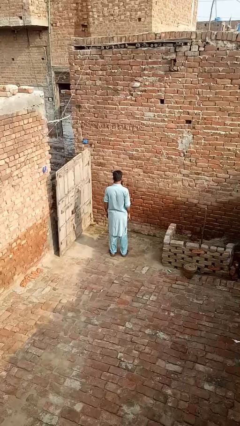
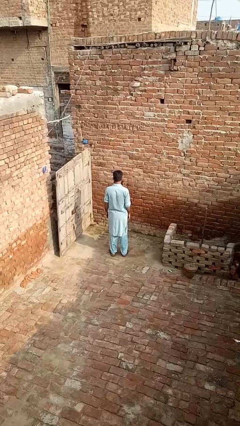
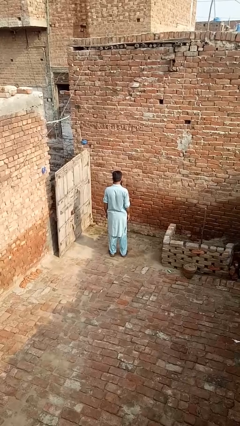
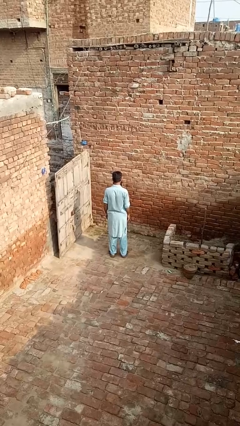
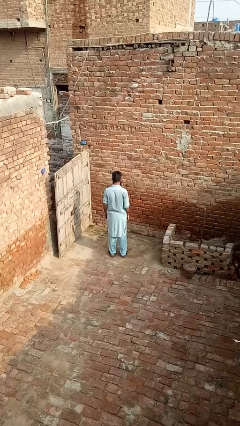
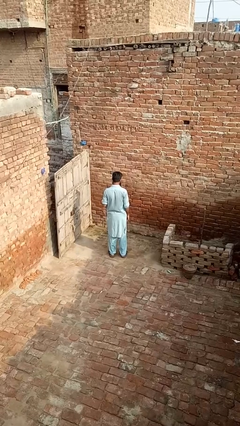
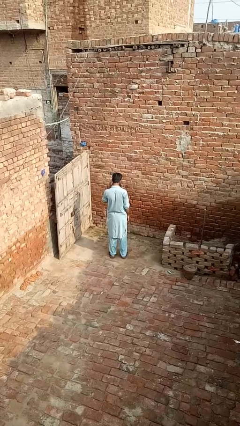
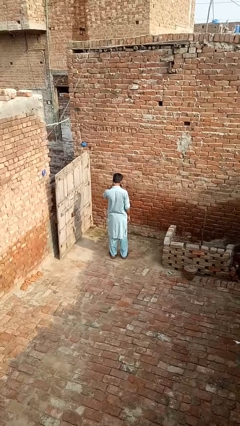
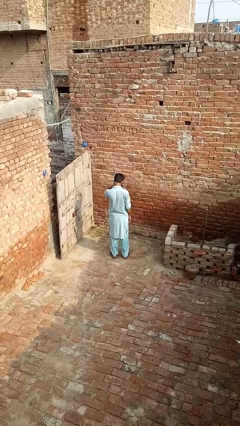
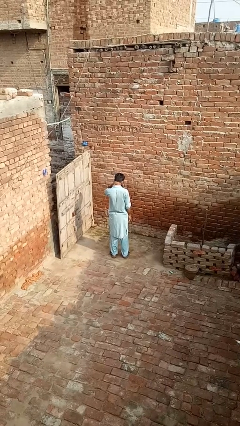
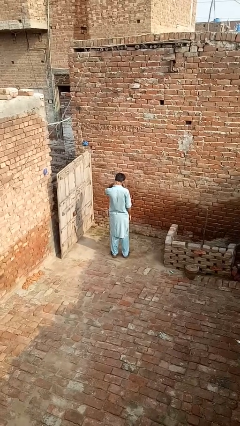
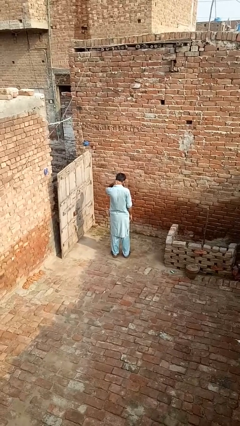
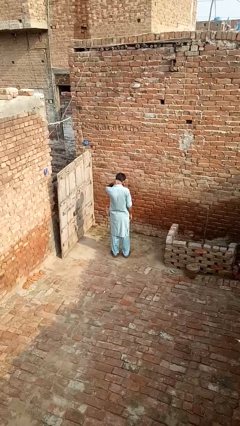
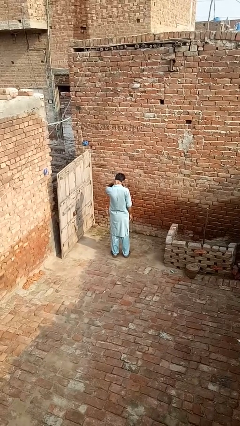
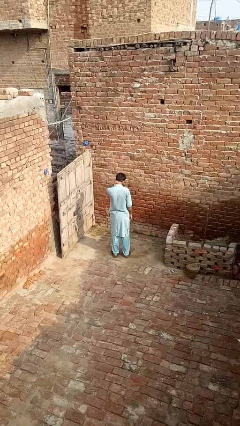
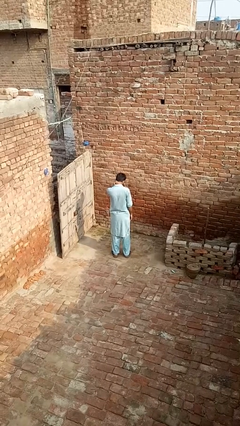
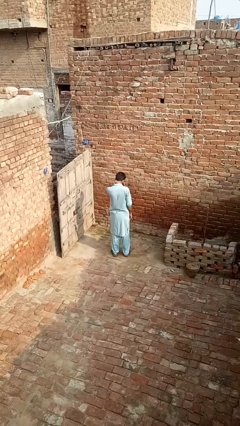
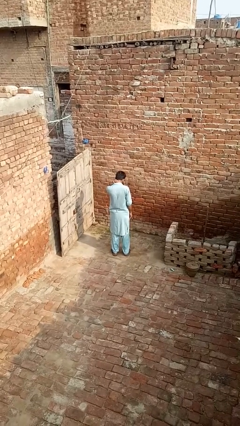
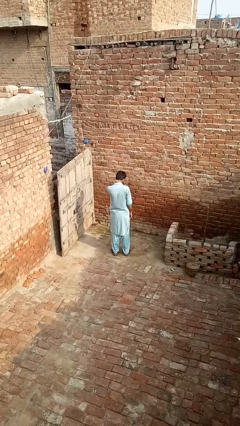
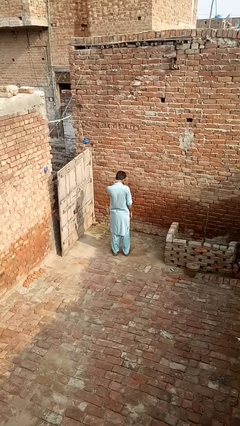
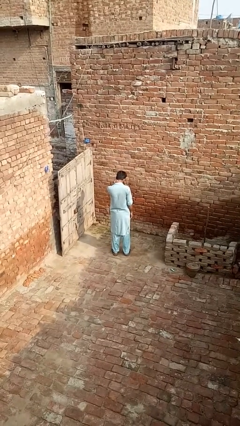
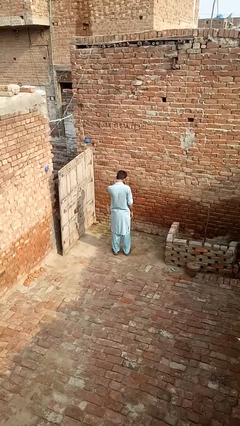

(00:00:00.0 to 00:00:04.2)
person rubs neck

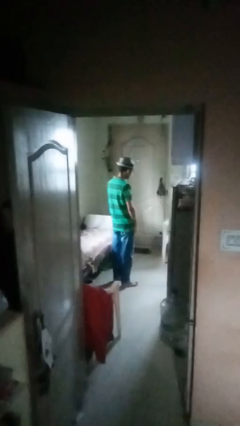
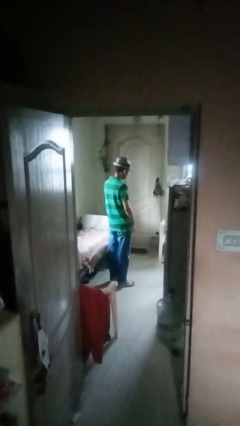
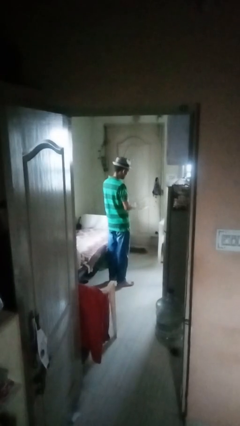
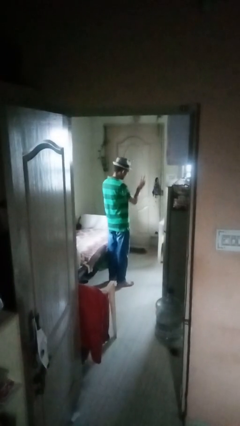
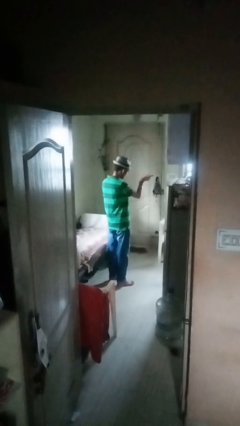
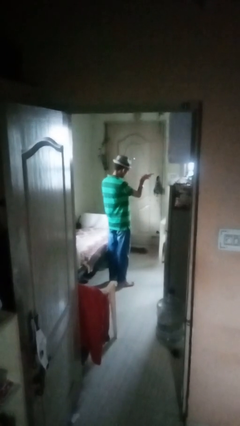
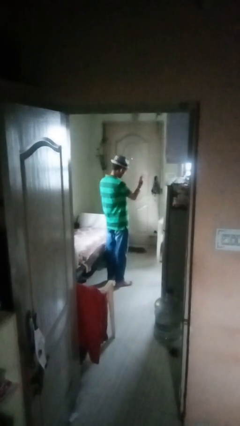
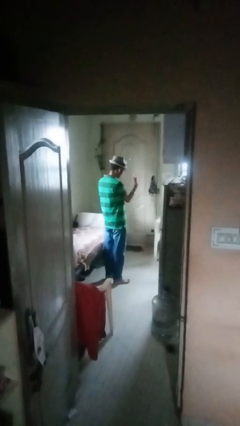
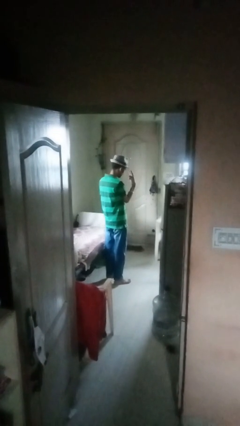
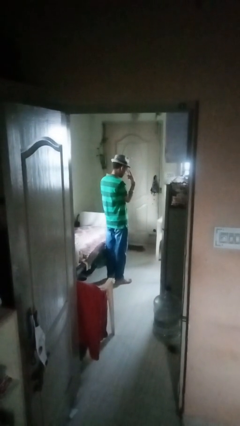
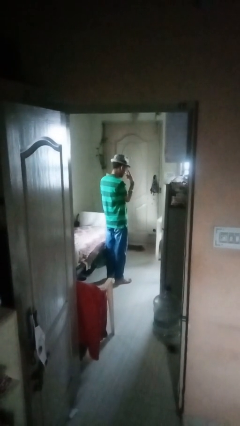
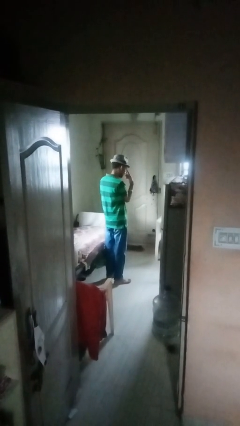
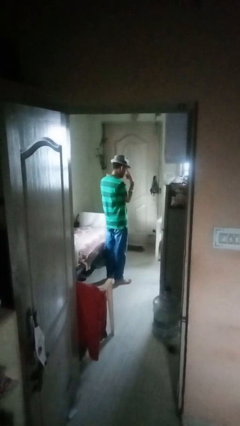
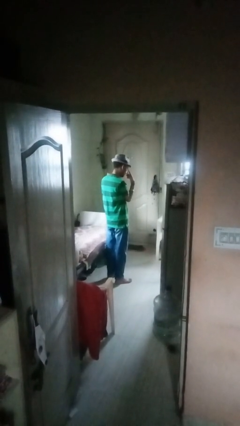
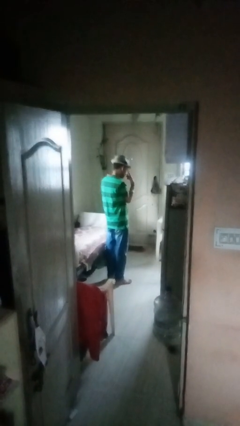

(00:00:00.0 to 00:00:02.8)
person gestures watch closely

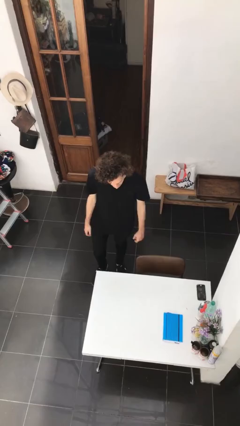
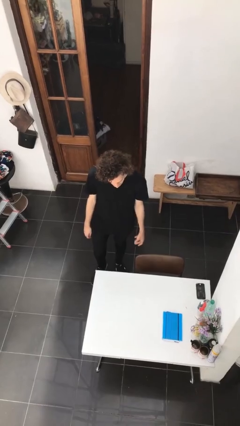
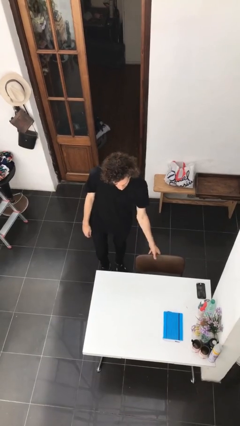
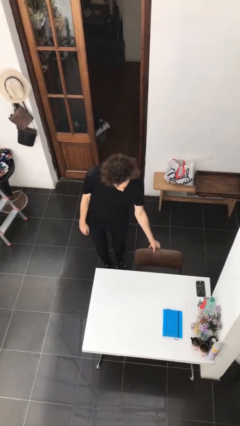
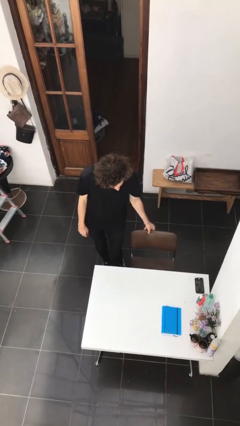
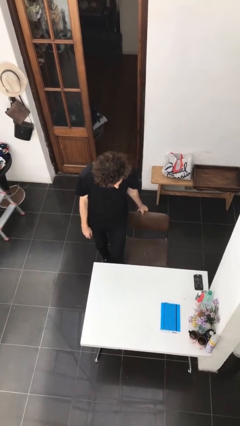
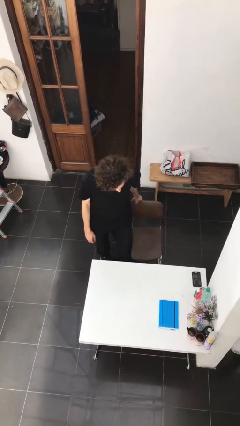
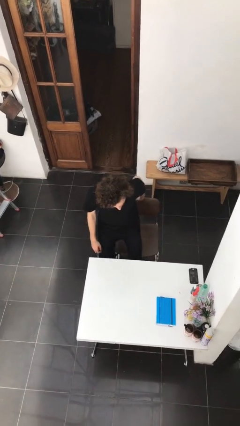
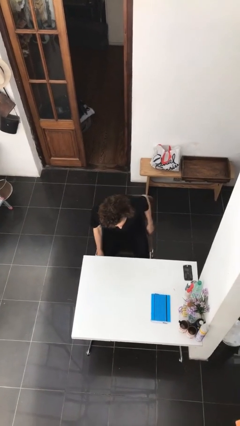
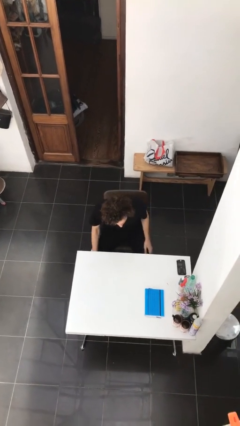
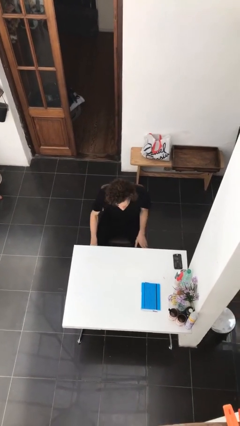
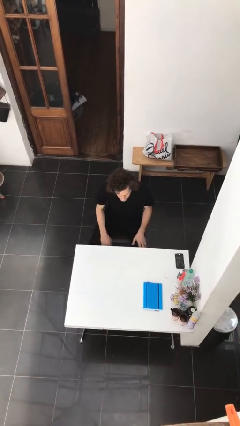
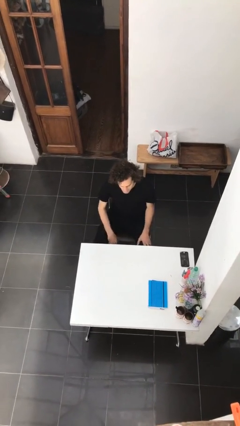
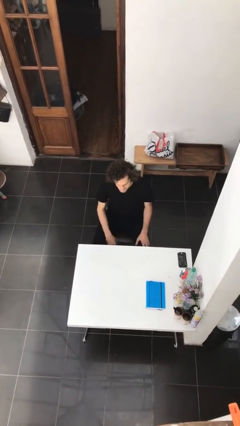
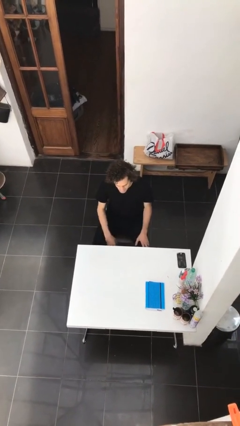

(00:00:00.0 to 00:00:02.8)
person sits down

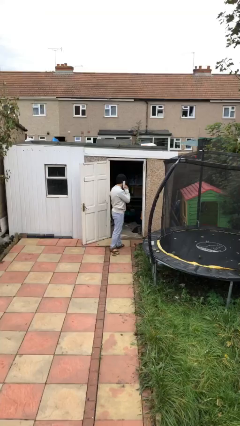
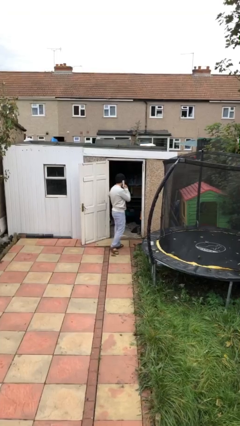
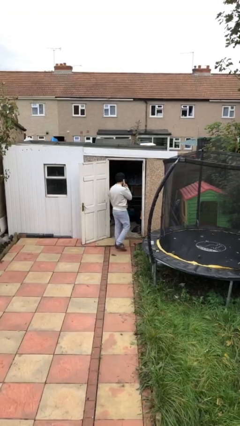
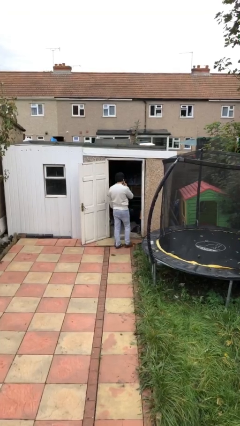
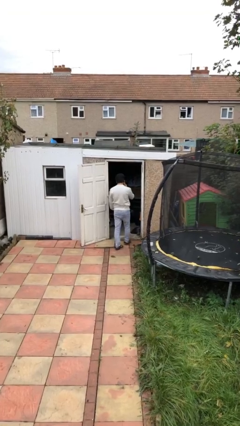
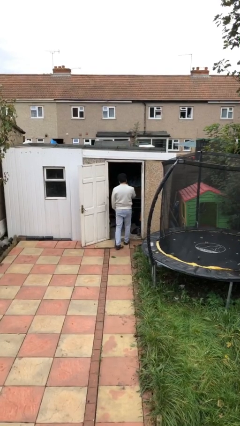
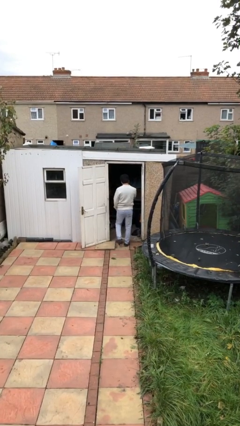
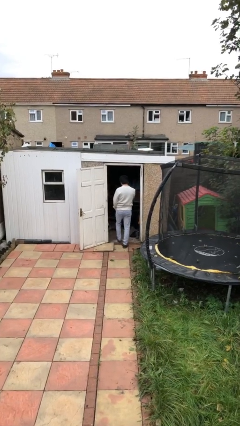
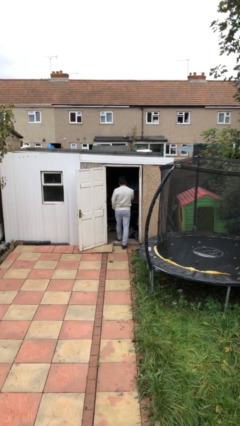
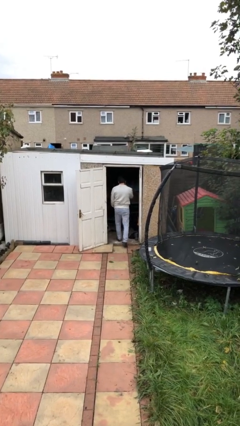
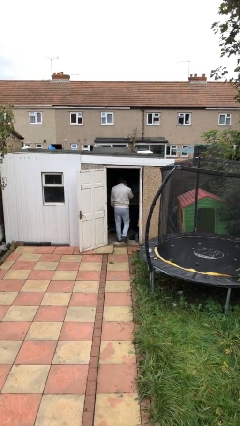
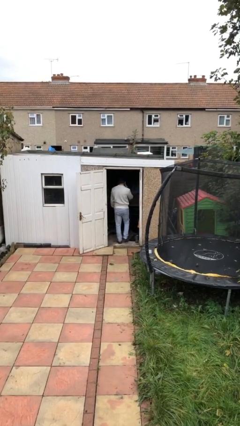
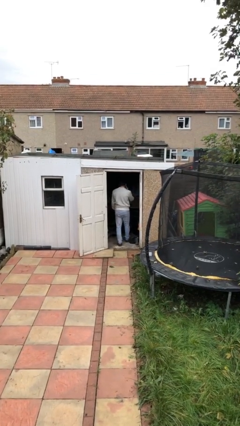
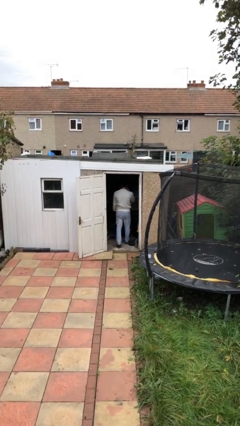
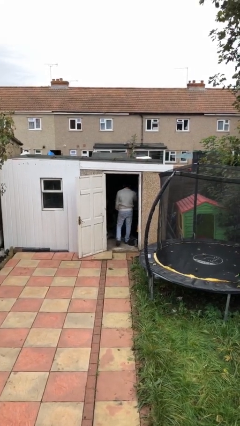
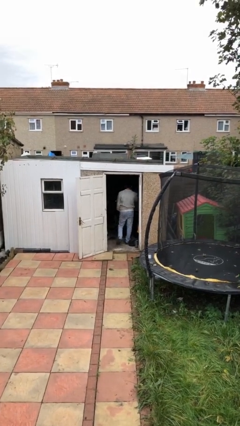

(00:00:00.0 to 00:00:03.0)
person exits scene through structure

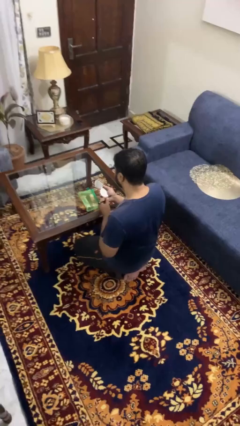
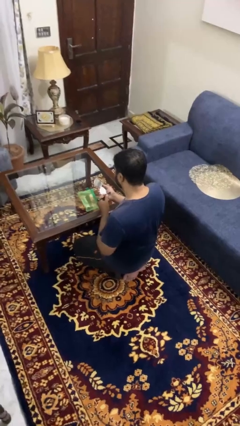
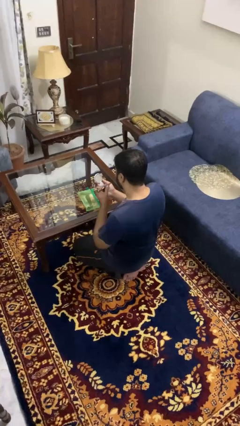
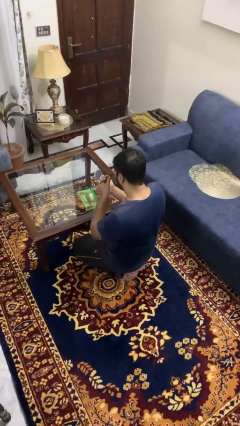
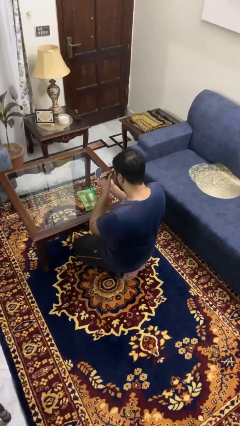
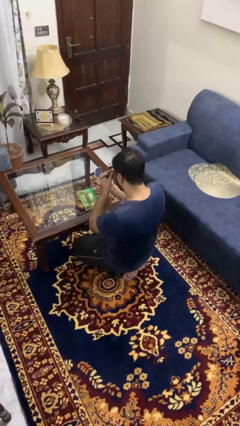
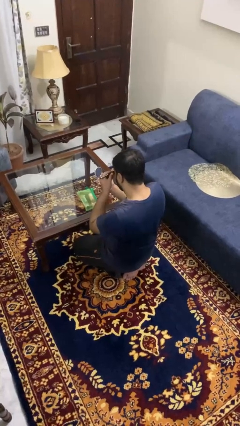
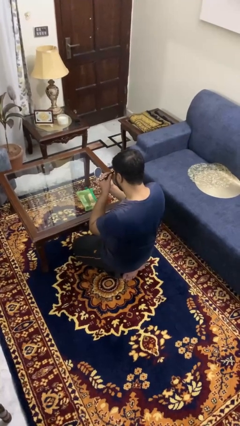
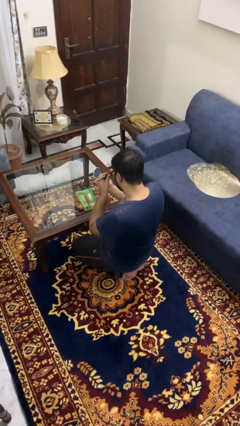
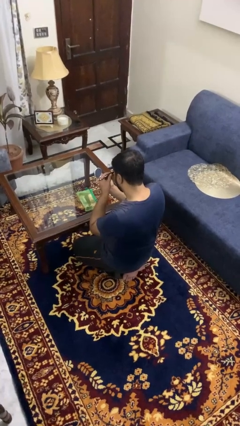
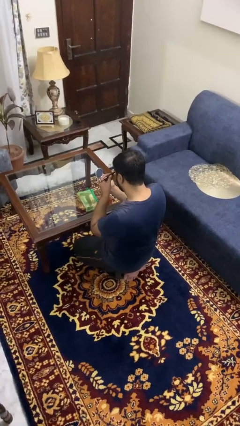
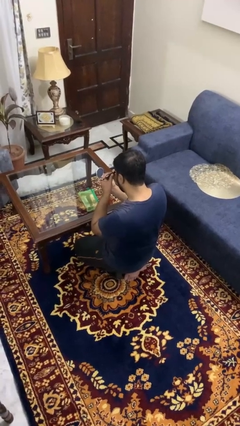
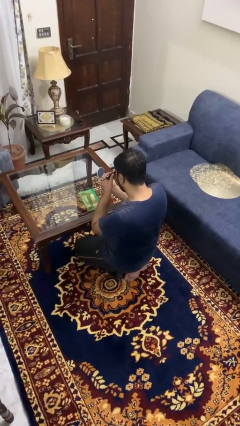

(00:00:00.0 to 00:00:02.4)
person applies eye makeup

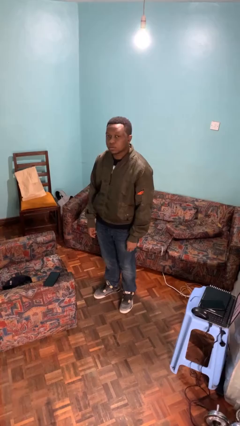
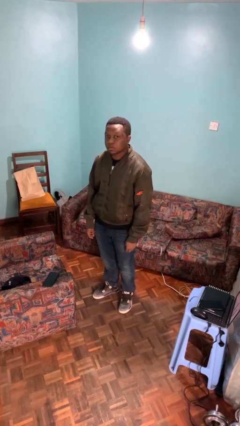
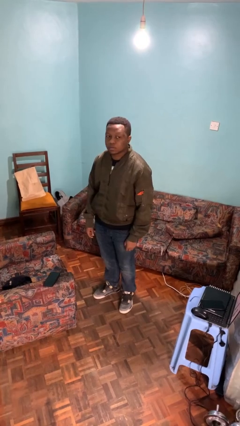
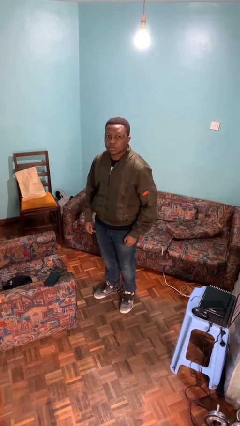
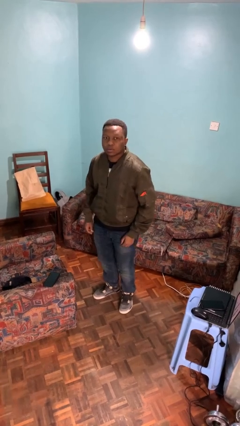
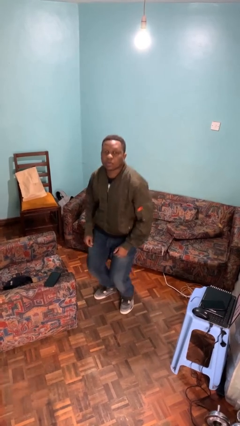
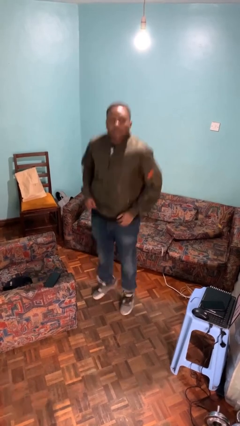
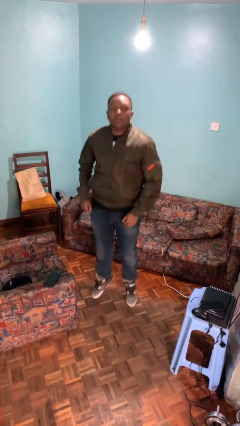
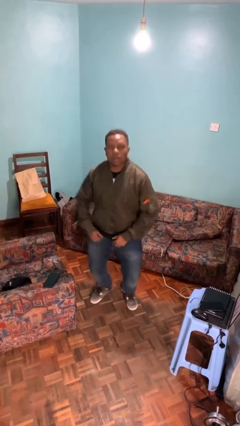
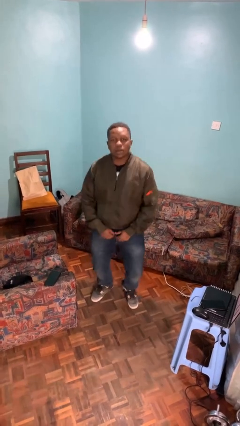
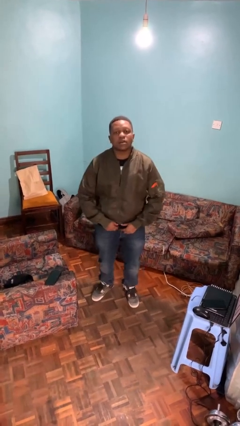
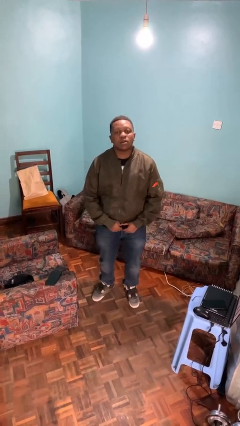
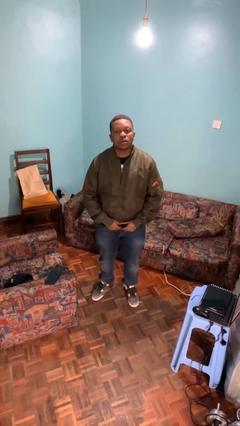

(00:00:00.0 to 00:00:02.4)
person jumps
